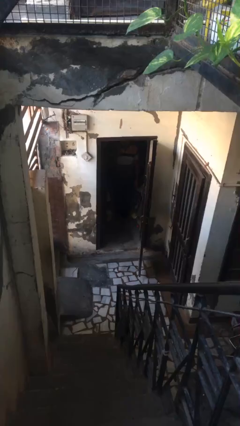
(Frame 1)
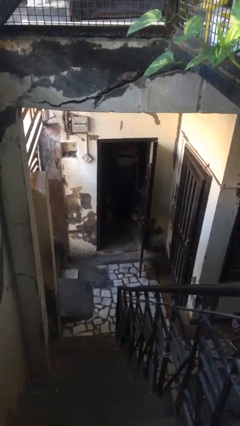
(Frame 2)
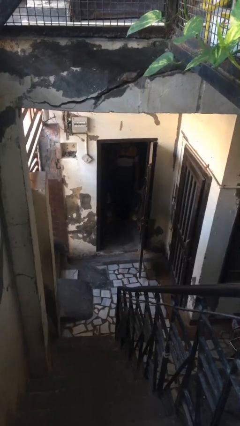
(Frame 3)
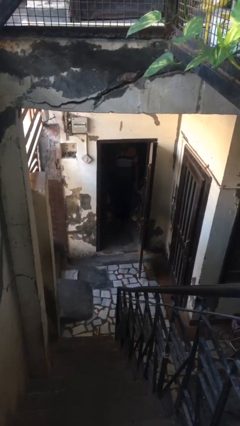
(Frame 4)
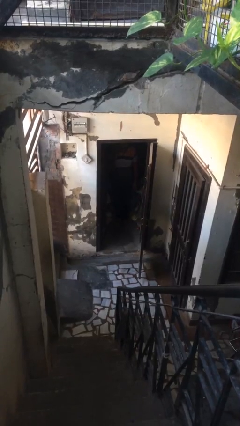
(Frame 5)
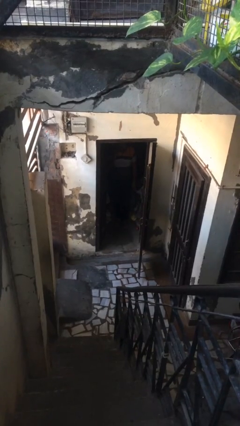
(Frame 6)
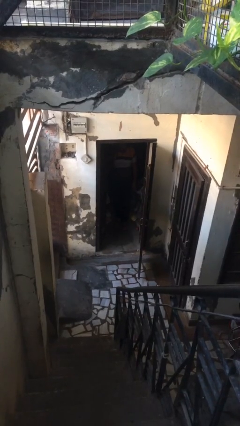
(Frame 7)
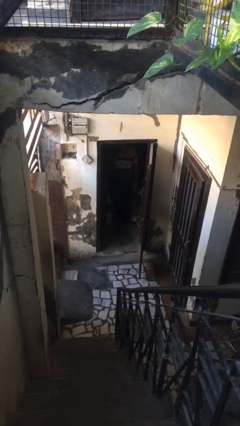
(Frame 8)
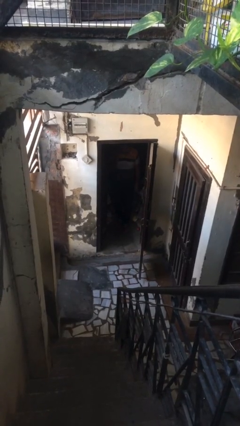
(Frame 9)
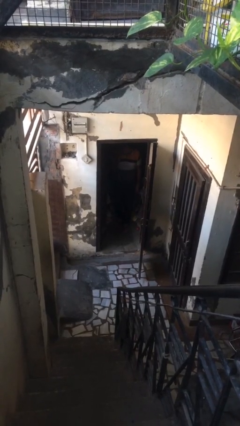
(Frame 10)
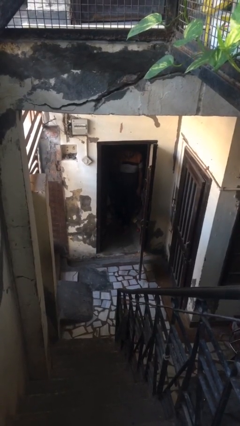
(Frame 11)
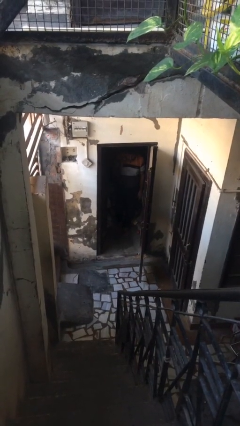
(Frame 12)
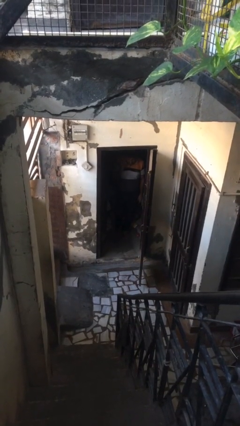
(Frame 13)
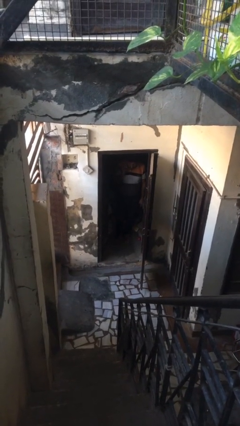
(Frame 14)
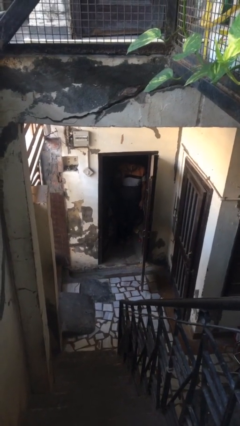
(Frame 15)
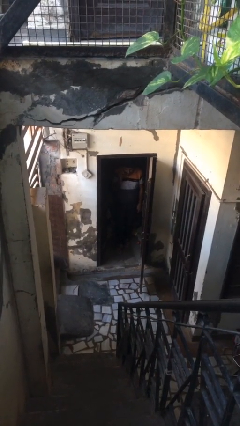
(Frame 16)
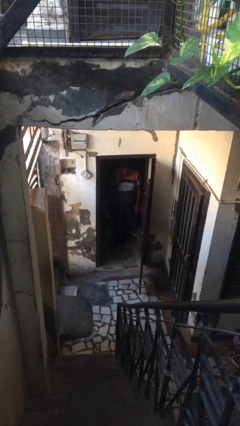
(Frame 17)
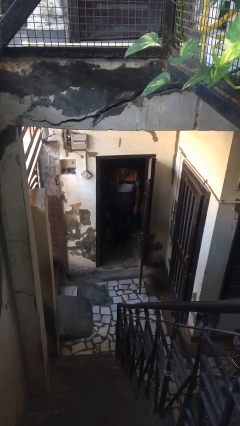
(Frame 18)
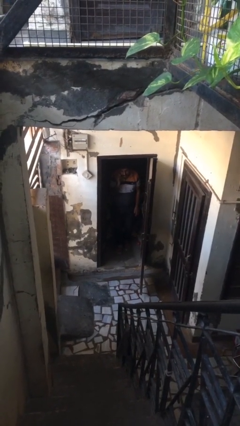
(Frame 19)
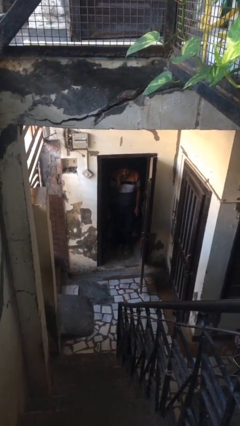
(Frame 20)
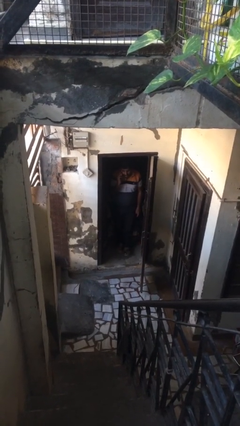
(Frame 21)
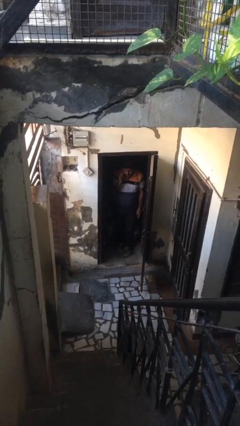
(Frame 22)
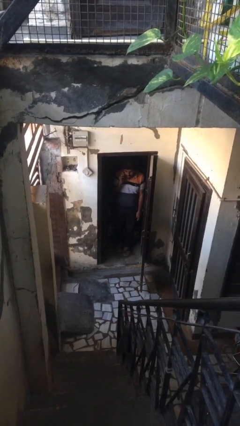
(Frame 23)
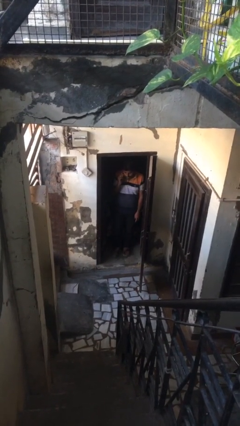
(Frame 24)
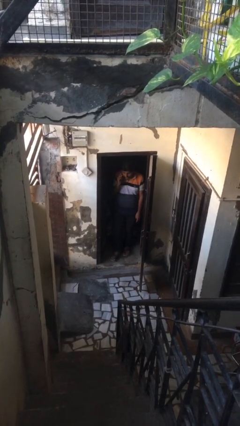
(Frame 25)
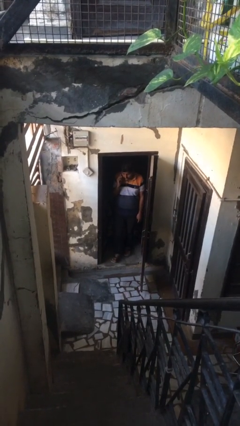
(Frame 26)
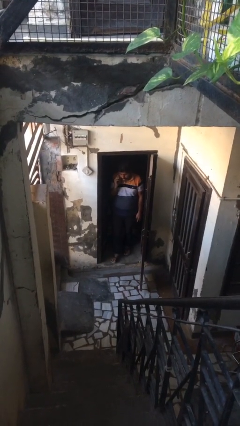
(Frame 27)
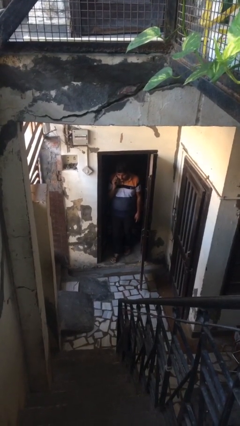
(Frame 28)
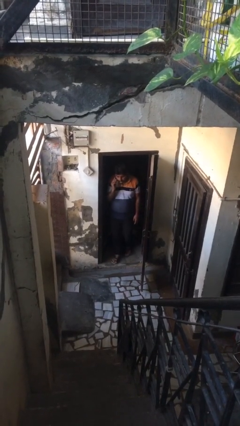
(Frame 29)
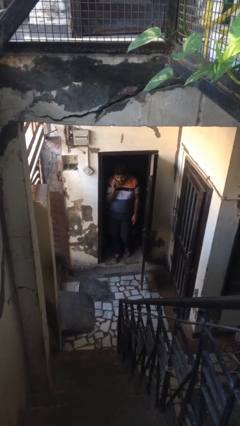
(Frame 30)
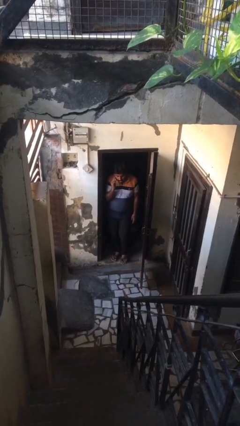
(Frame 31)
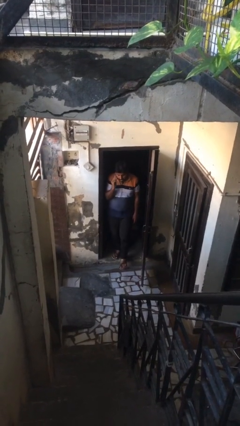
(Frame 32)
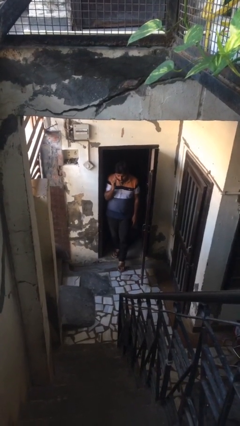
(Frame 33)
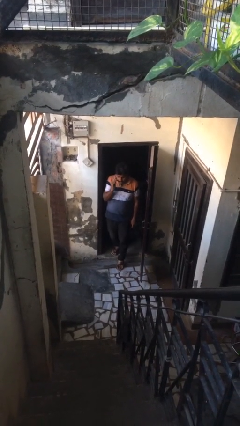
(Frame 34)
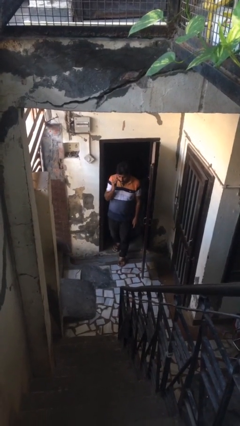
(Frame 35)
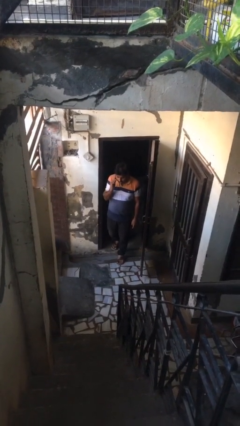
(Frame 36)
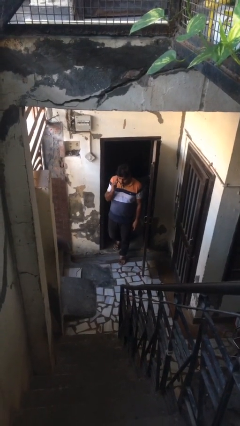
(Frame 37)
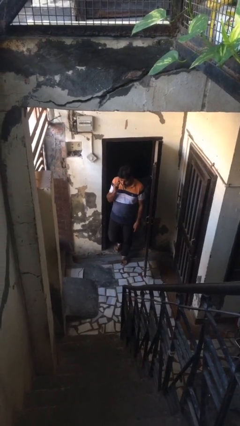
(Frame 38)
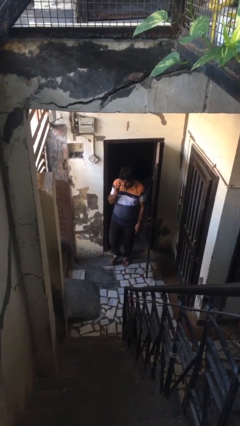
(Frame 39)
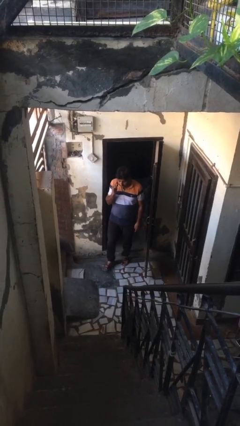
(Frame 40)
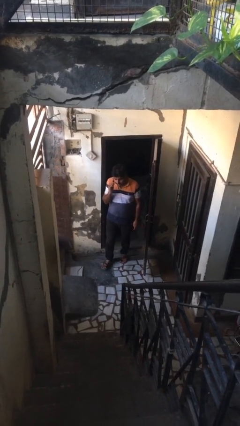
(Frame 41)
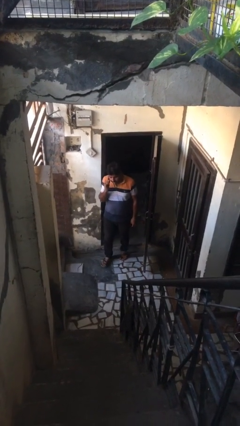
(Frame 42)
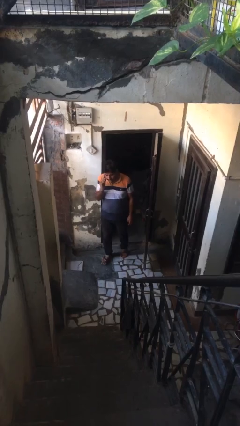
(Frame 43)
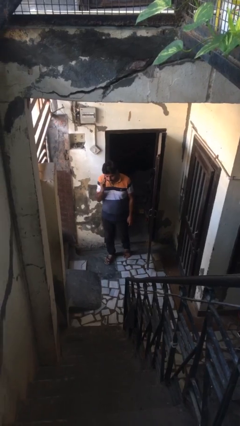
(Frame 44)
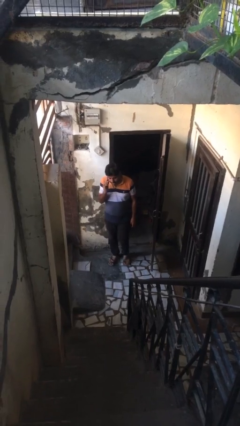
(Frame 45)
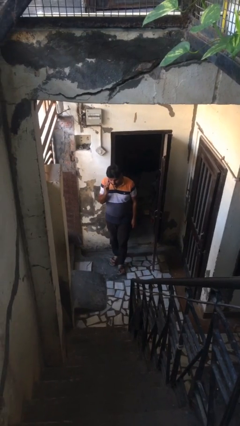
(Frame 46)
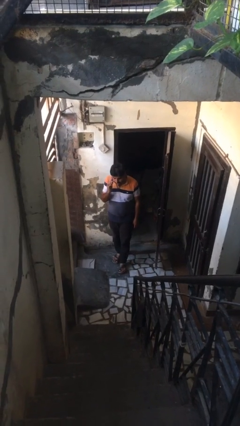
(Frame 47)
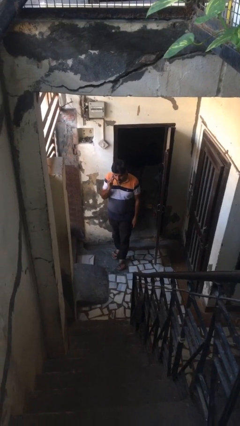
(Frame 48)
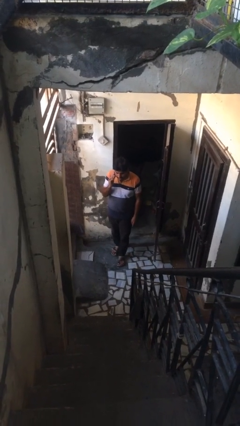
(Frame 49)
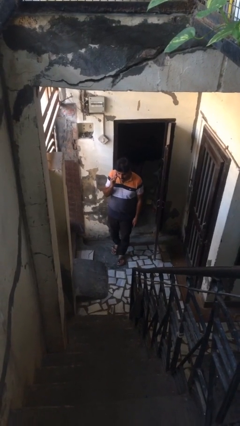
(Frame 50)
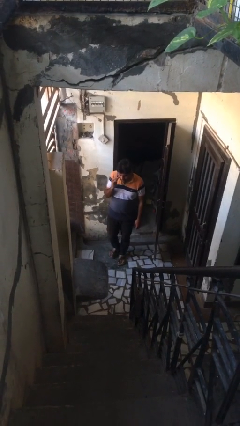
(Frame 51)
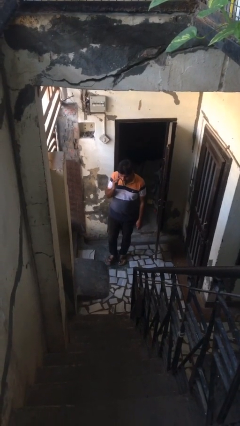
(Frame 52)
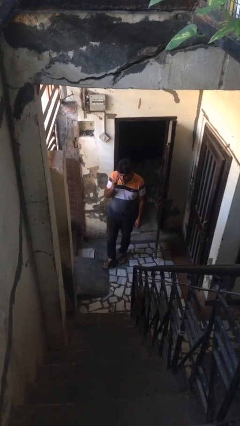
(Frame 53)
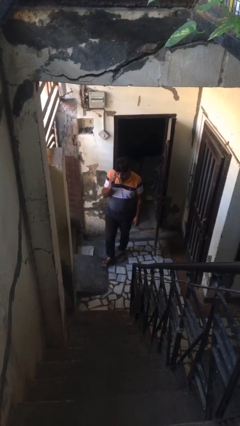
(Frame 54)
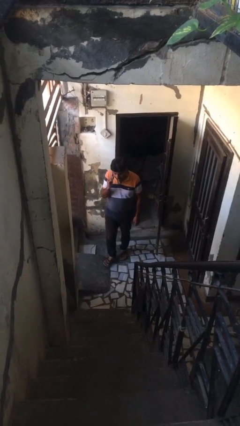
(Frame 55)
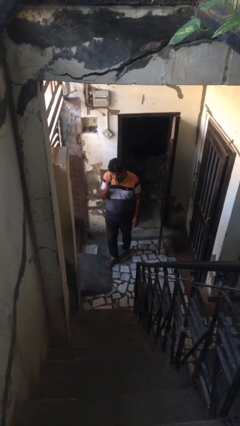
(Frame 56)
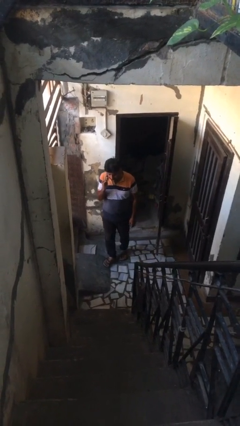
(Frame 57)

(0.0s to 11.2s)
person exits scene through structure

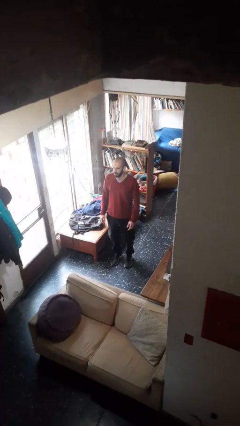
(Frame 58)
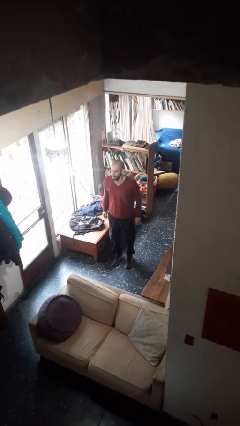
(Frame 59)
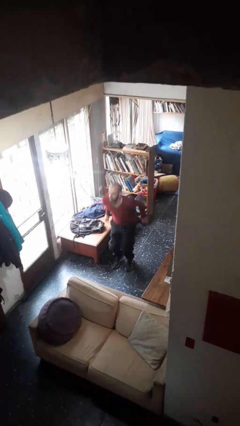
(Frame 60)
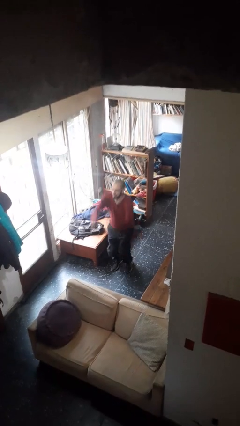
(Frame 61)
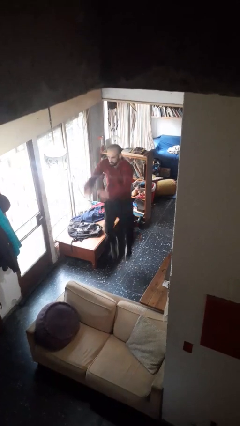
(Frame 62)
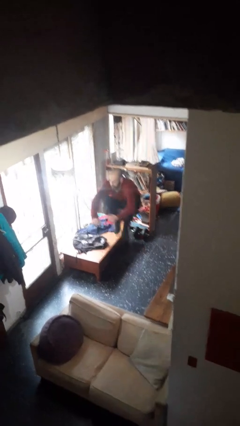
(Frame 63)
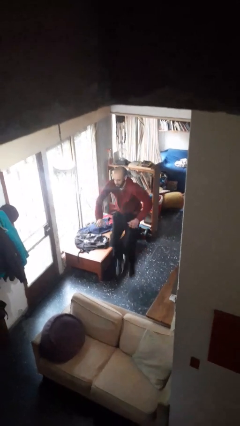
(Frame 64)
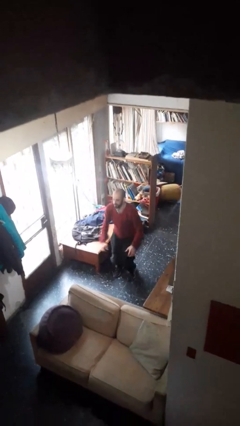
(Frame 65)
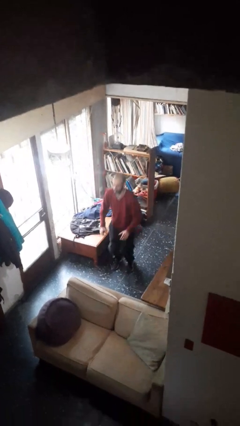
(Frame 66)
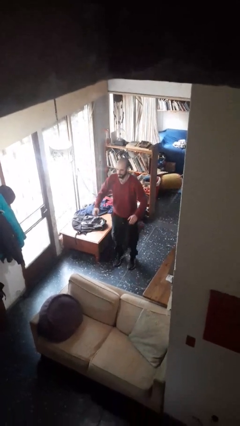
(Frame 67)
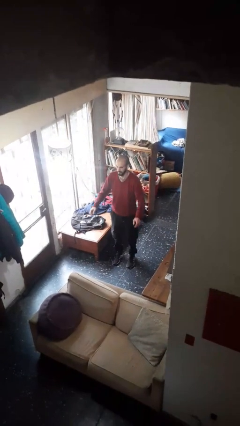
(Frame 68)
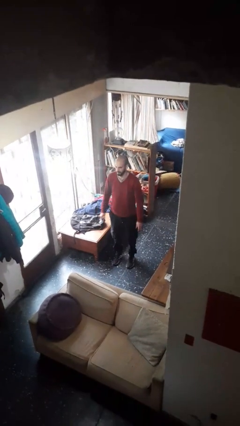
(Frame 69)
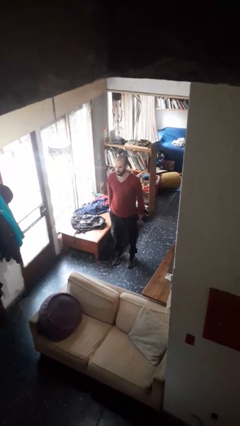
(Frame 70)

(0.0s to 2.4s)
person jumps

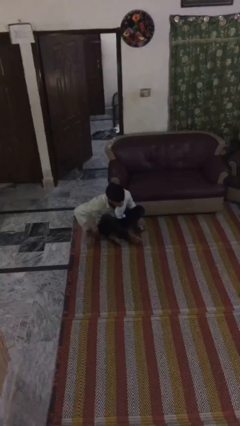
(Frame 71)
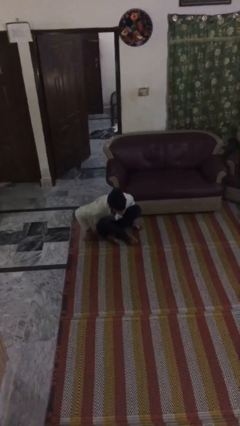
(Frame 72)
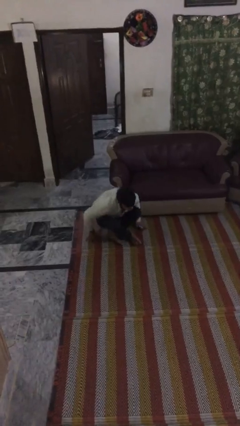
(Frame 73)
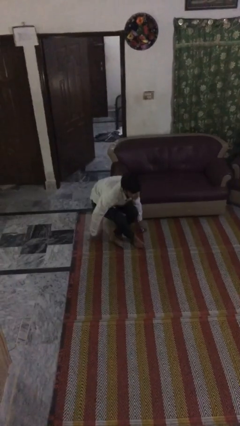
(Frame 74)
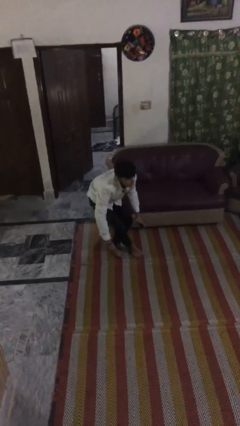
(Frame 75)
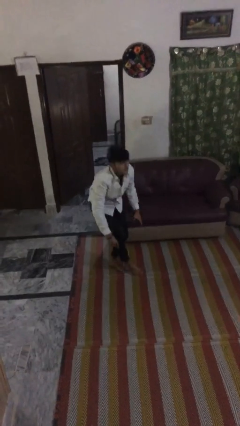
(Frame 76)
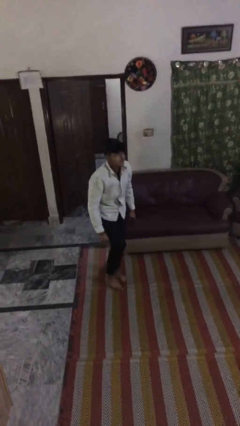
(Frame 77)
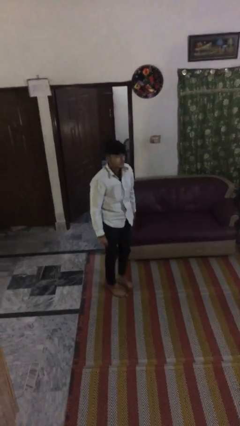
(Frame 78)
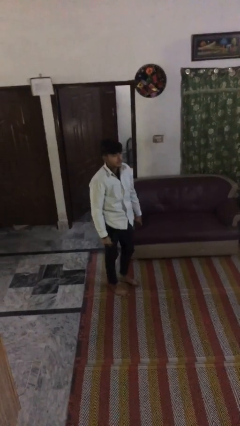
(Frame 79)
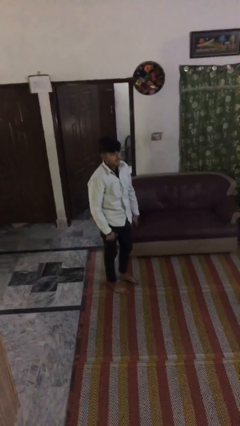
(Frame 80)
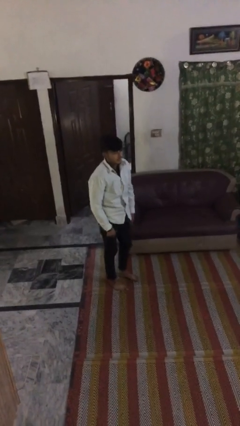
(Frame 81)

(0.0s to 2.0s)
person stands up

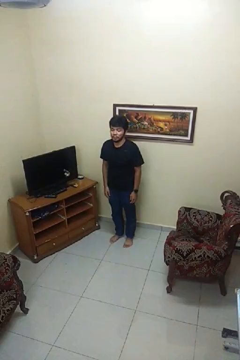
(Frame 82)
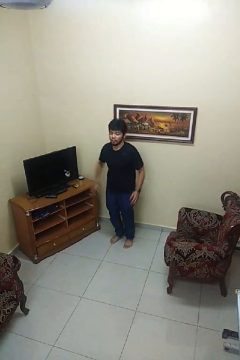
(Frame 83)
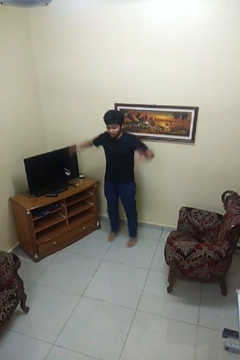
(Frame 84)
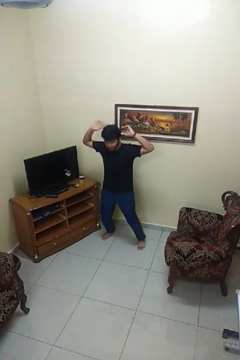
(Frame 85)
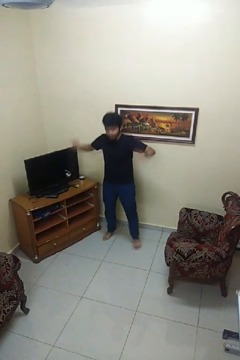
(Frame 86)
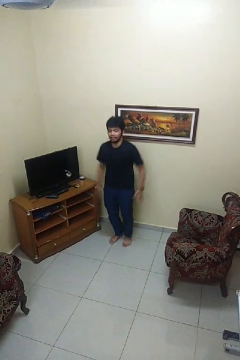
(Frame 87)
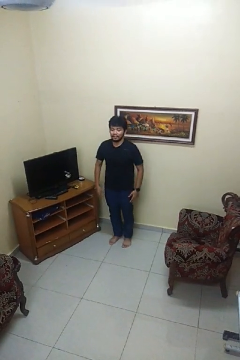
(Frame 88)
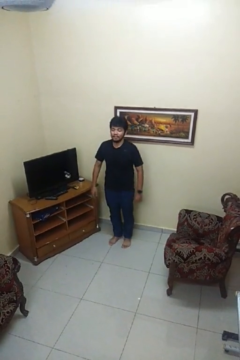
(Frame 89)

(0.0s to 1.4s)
person exercises with jumping jacks

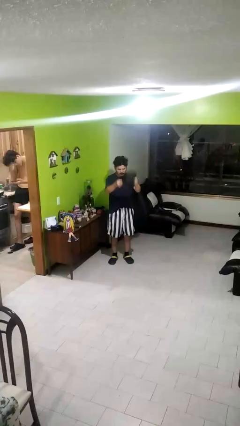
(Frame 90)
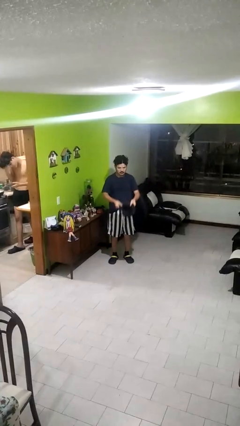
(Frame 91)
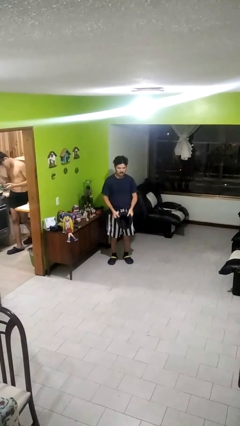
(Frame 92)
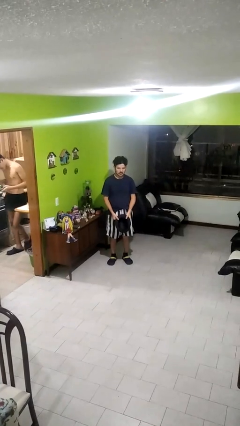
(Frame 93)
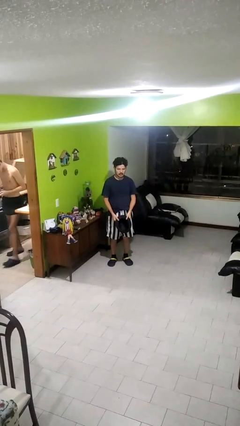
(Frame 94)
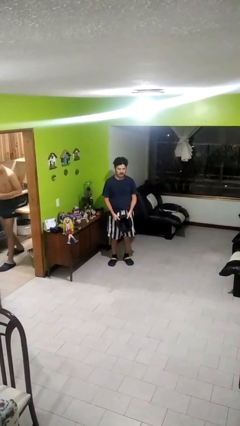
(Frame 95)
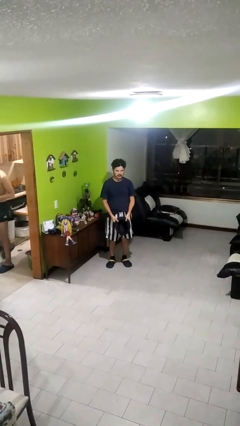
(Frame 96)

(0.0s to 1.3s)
person takes off hat
